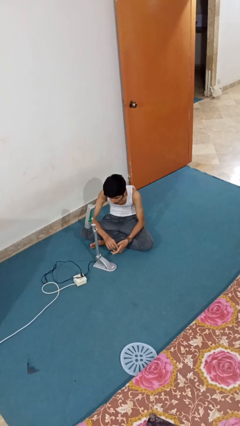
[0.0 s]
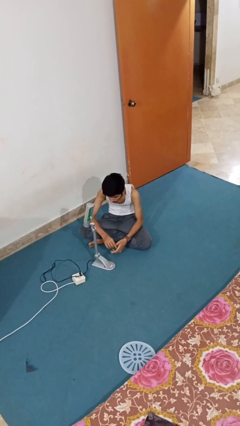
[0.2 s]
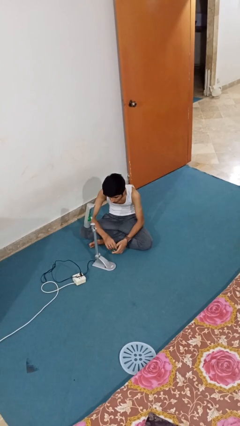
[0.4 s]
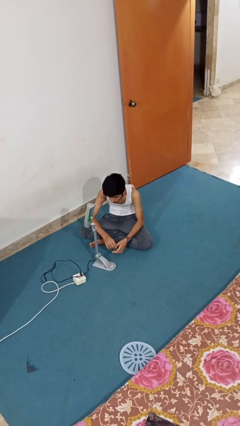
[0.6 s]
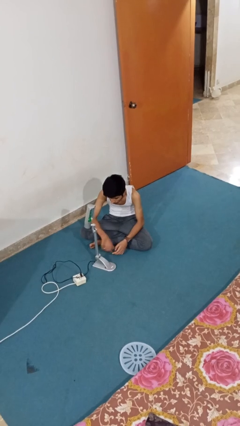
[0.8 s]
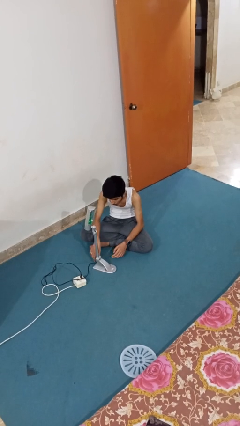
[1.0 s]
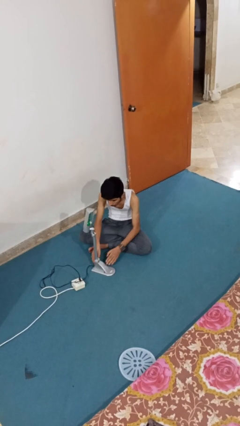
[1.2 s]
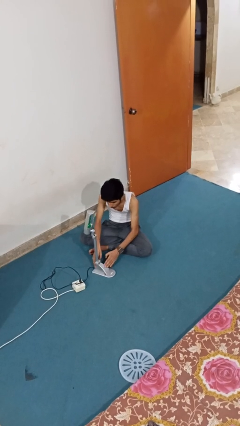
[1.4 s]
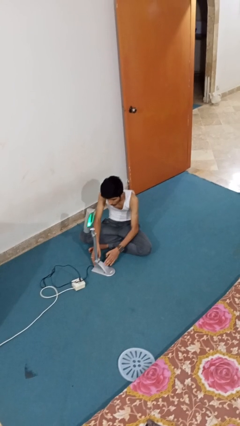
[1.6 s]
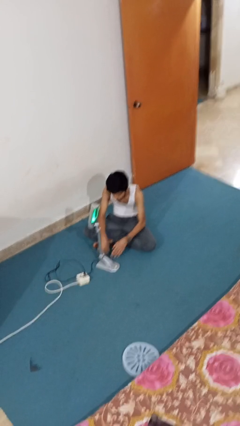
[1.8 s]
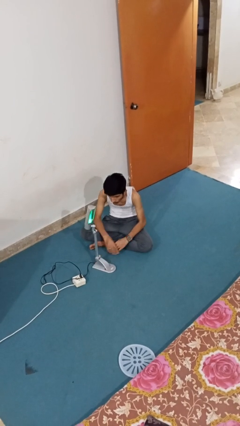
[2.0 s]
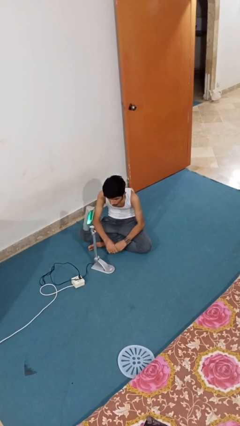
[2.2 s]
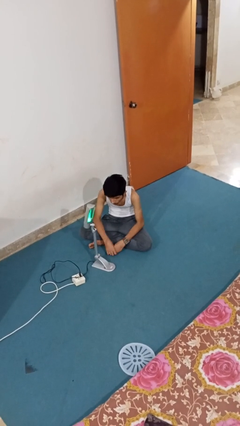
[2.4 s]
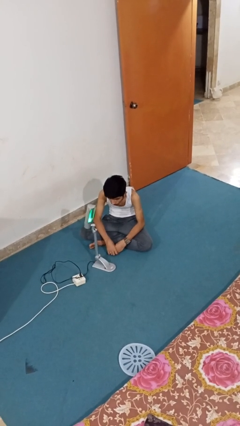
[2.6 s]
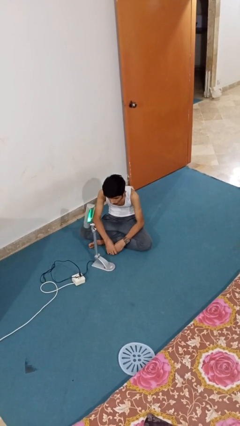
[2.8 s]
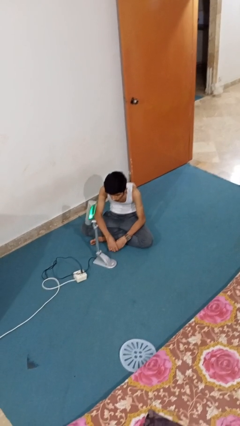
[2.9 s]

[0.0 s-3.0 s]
person turns on lamp

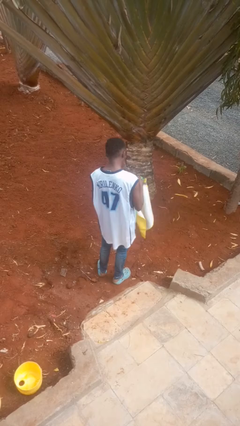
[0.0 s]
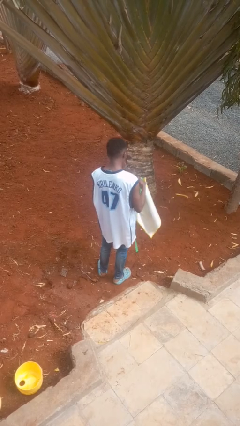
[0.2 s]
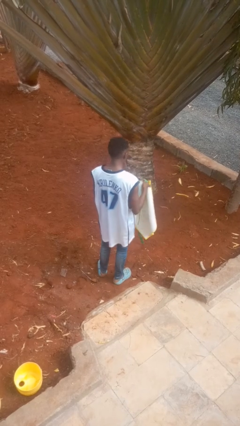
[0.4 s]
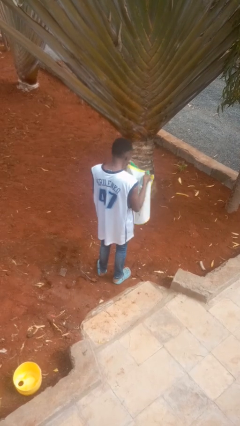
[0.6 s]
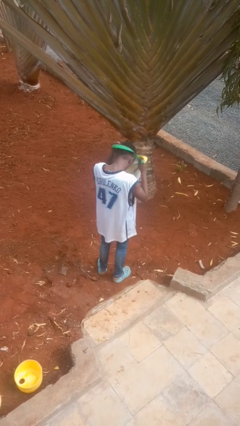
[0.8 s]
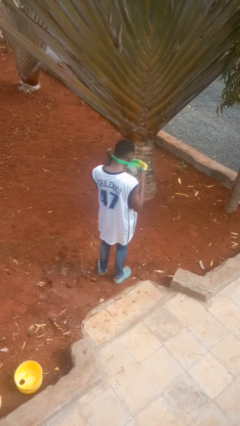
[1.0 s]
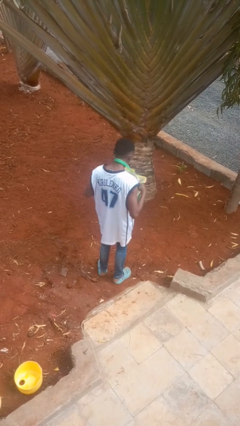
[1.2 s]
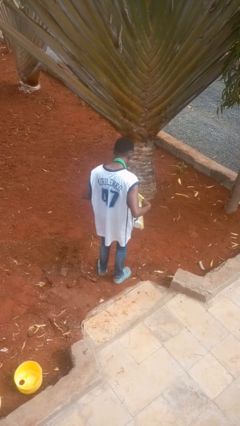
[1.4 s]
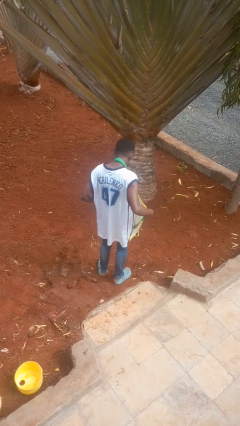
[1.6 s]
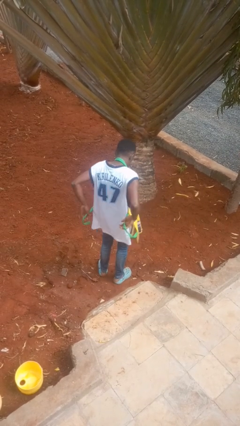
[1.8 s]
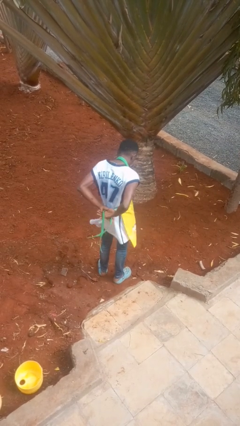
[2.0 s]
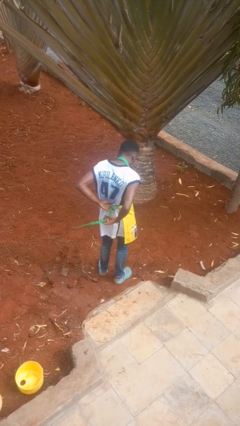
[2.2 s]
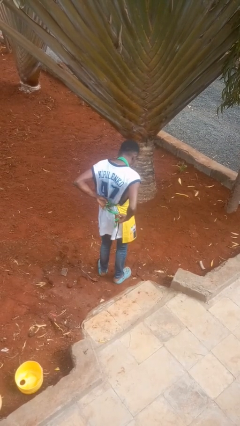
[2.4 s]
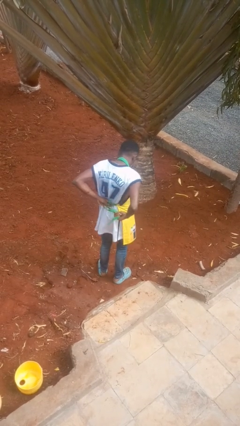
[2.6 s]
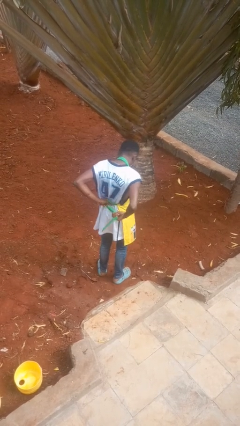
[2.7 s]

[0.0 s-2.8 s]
person puts on apron

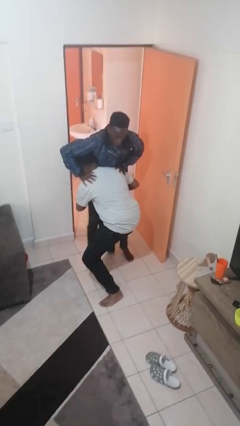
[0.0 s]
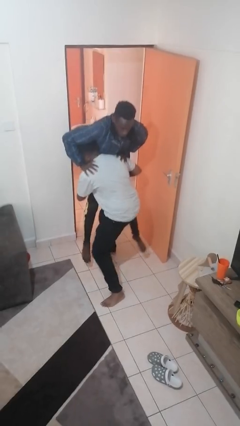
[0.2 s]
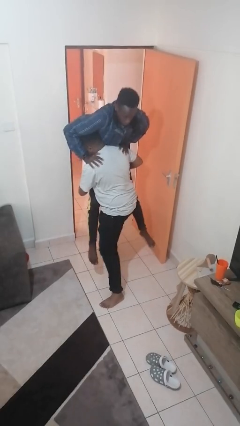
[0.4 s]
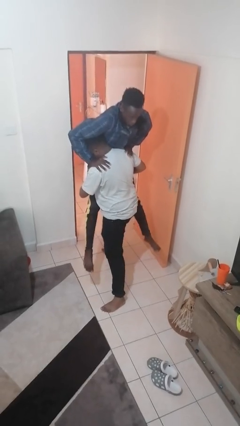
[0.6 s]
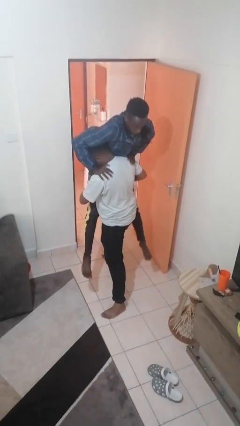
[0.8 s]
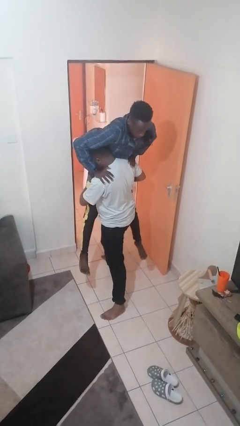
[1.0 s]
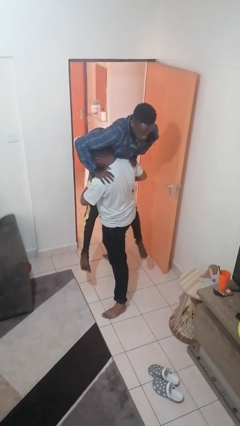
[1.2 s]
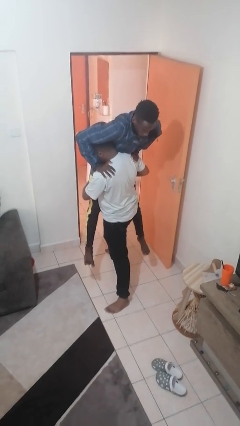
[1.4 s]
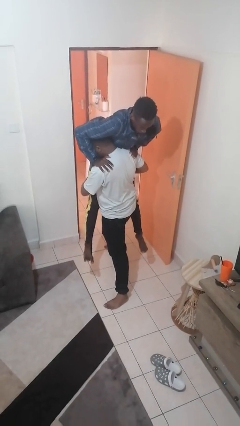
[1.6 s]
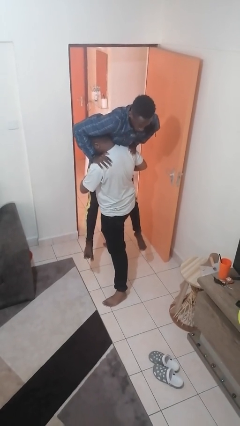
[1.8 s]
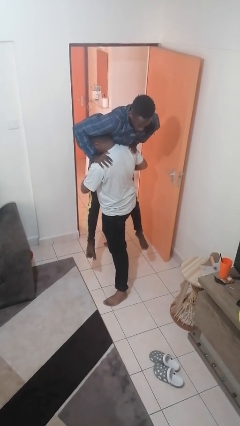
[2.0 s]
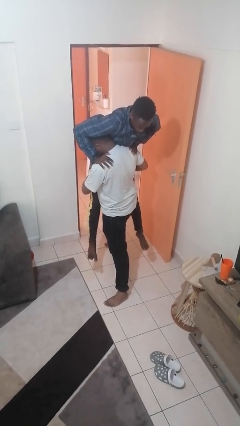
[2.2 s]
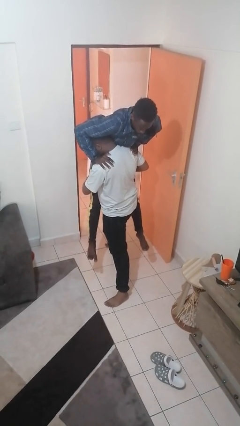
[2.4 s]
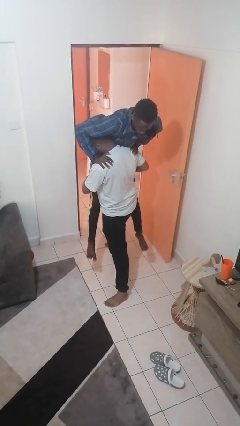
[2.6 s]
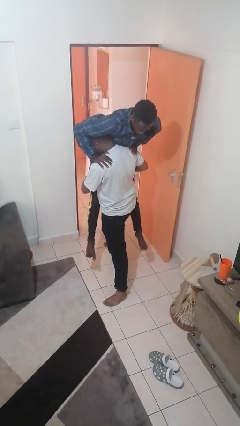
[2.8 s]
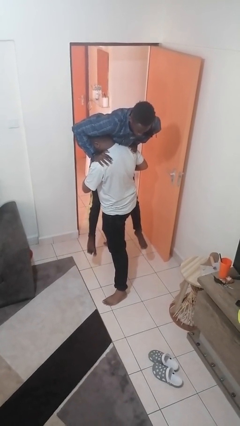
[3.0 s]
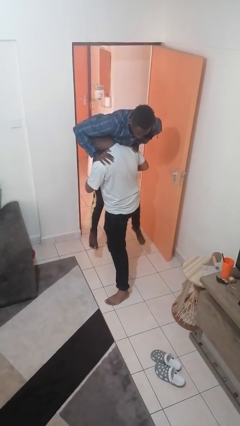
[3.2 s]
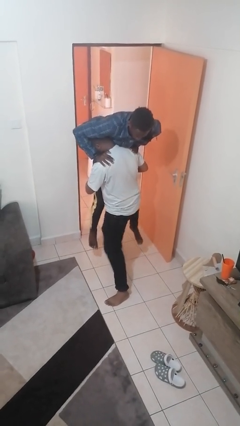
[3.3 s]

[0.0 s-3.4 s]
person picks up person

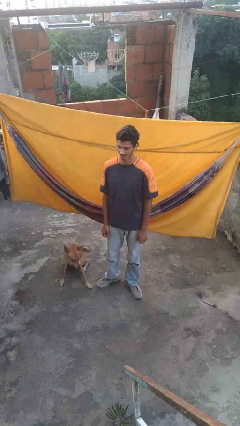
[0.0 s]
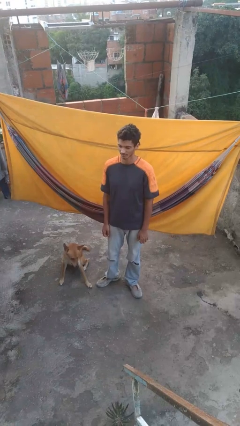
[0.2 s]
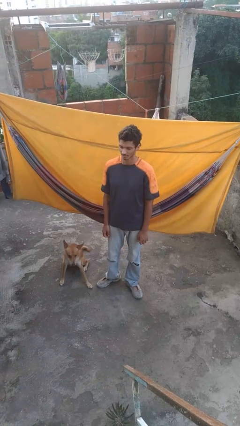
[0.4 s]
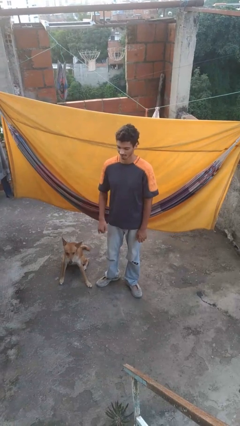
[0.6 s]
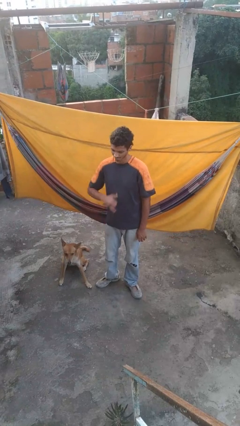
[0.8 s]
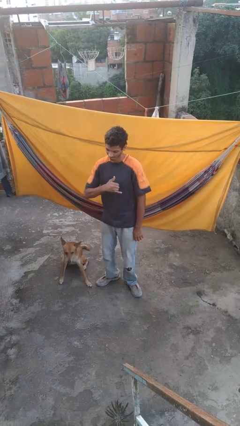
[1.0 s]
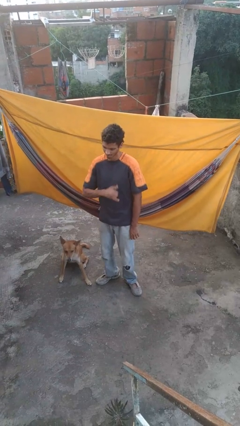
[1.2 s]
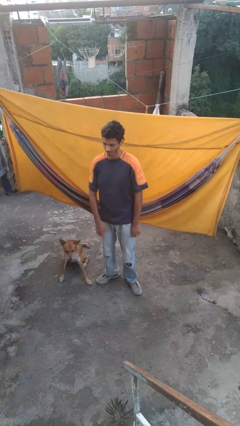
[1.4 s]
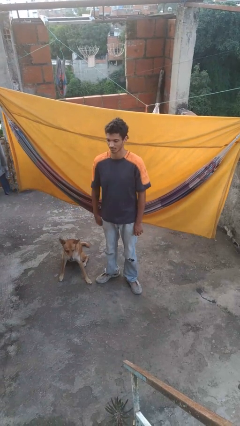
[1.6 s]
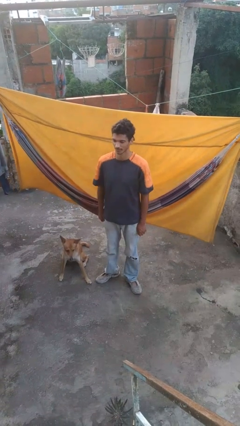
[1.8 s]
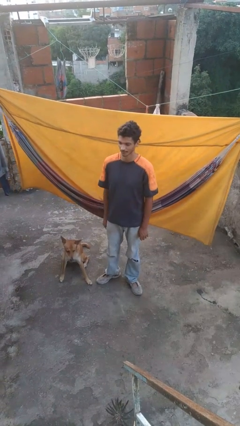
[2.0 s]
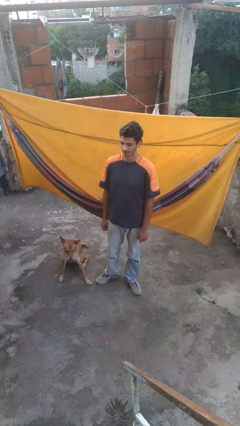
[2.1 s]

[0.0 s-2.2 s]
person gestures hang loose

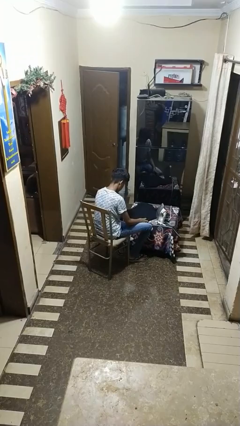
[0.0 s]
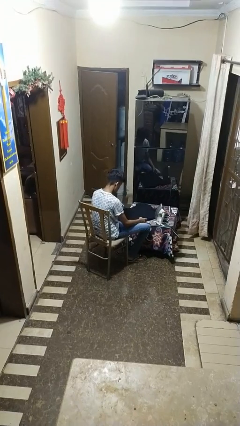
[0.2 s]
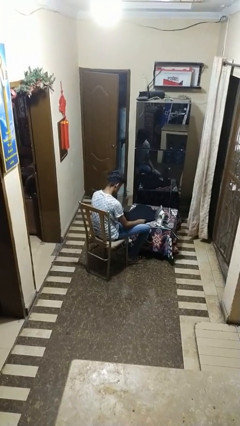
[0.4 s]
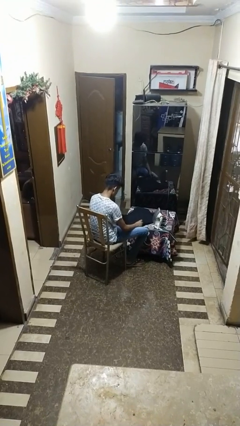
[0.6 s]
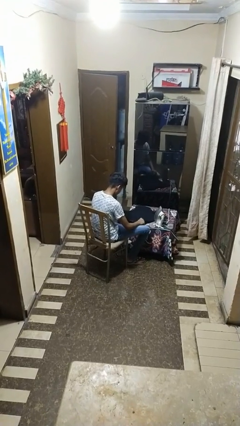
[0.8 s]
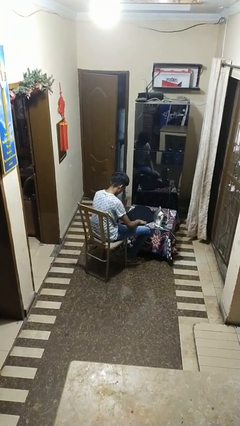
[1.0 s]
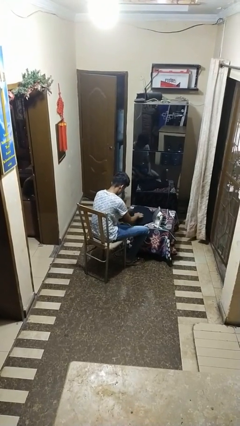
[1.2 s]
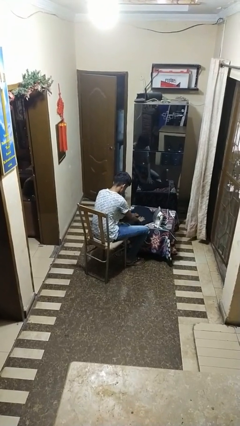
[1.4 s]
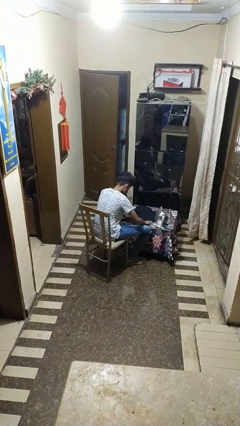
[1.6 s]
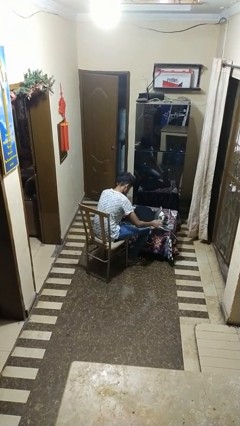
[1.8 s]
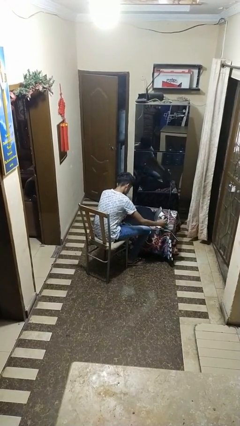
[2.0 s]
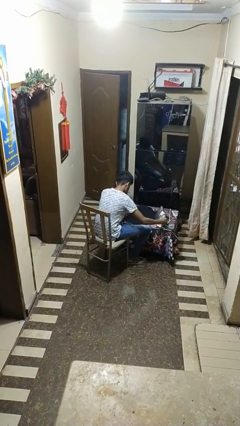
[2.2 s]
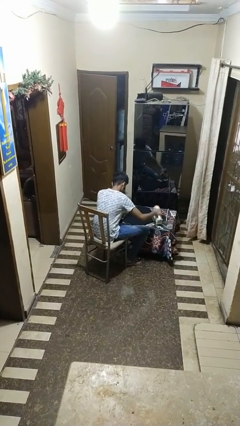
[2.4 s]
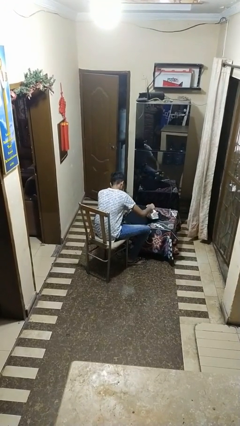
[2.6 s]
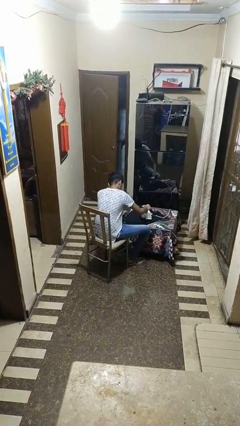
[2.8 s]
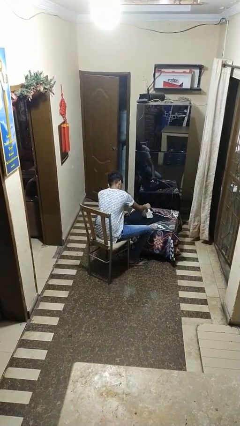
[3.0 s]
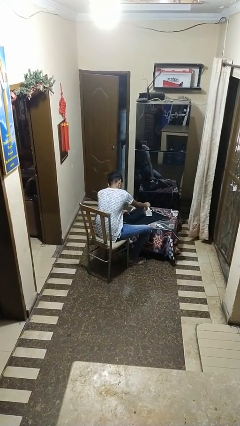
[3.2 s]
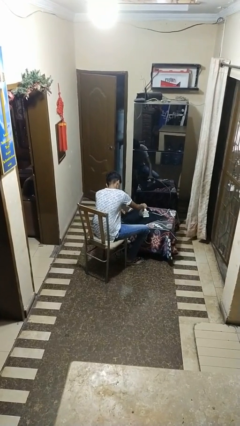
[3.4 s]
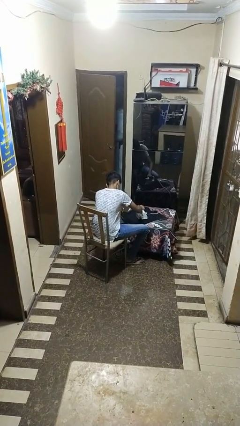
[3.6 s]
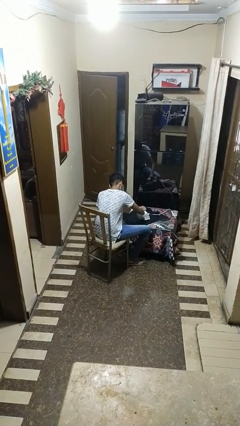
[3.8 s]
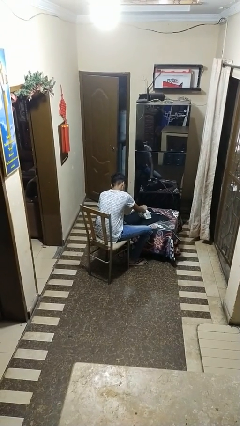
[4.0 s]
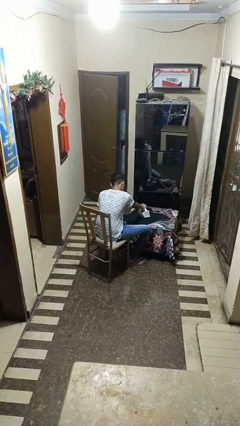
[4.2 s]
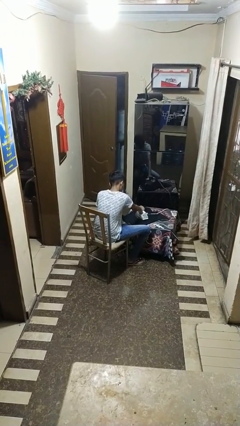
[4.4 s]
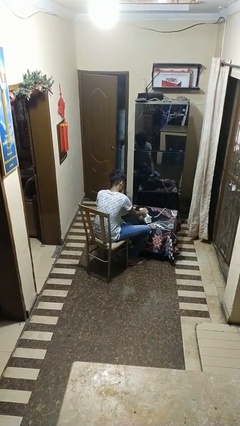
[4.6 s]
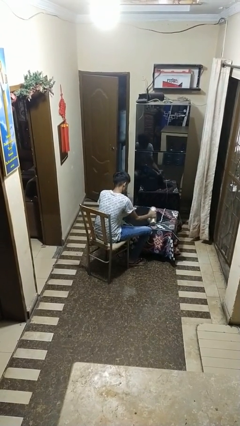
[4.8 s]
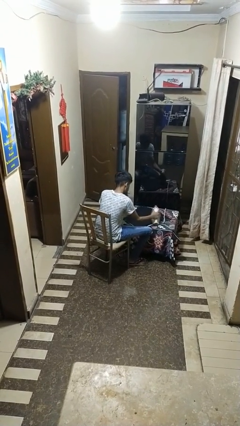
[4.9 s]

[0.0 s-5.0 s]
person irons clothes

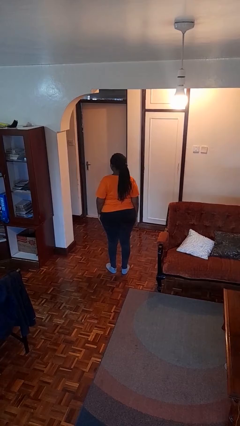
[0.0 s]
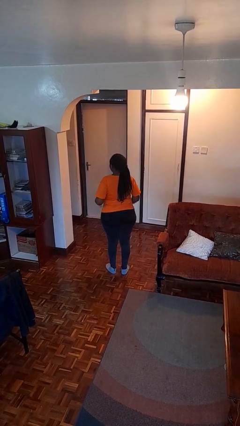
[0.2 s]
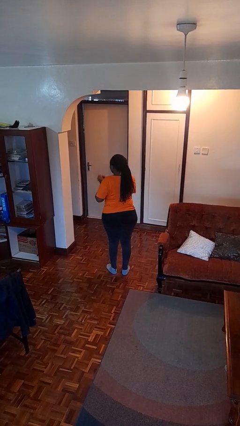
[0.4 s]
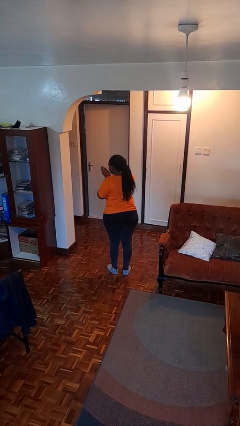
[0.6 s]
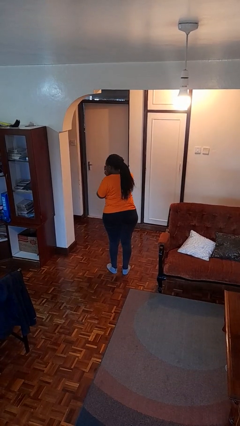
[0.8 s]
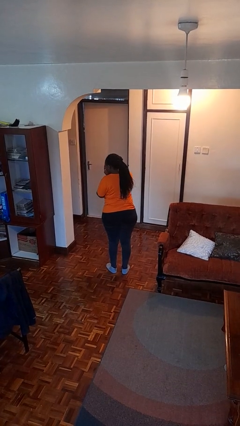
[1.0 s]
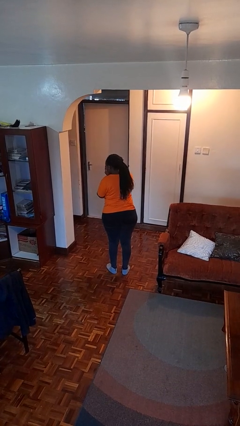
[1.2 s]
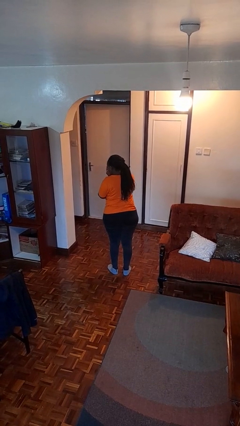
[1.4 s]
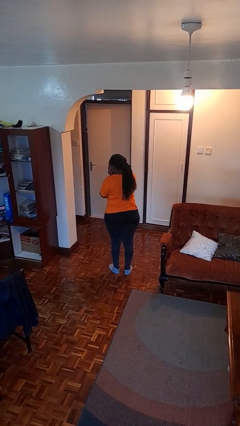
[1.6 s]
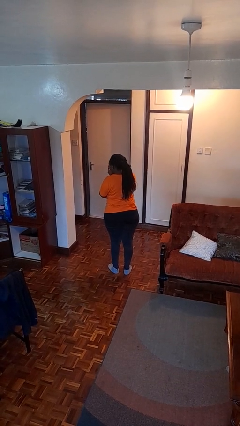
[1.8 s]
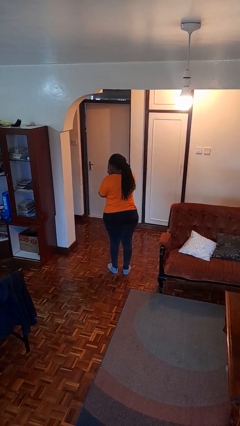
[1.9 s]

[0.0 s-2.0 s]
person sneezes into hand
